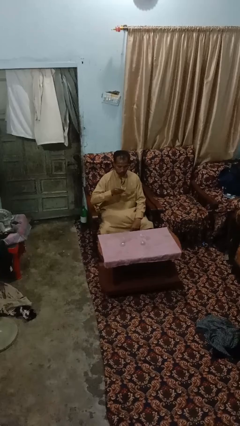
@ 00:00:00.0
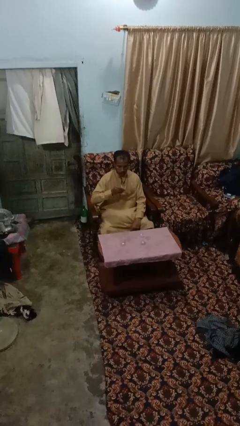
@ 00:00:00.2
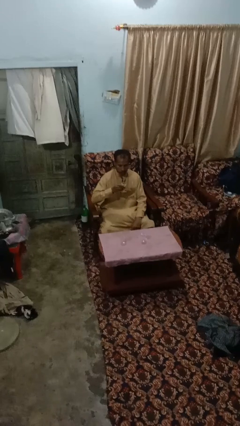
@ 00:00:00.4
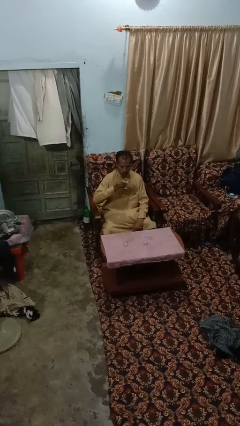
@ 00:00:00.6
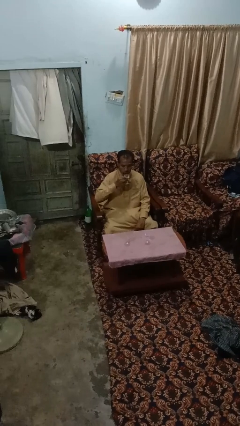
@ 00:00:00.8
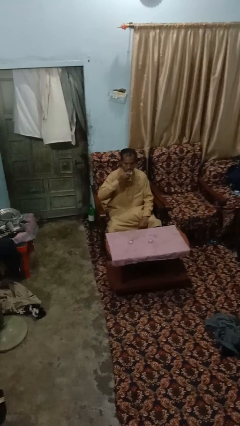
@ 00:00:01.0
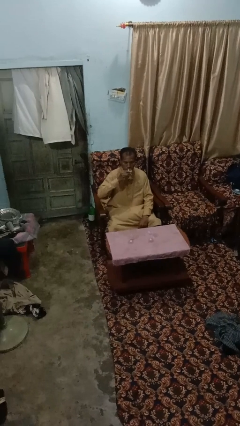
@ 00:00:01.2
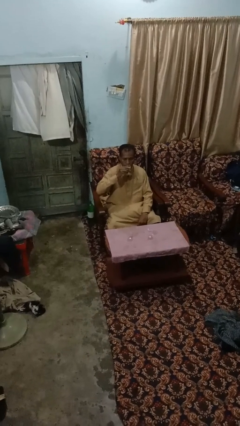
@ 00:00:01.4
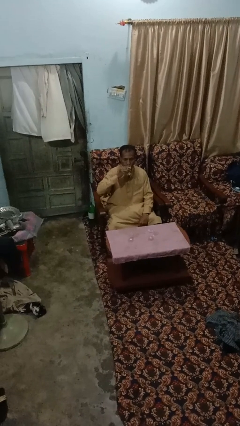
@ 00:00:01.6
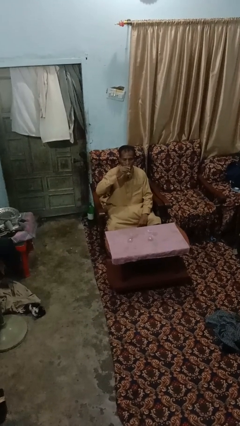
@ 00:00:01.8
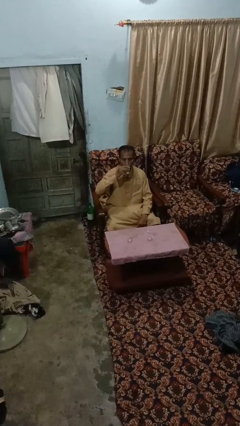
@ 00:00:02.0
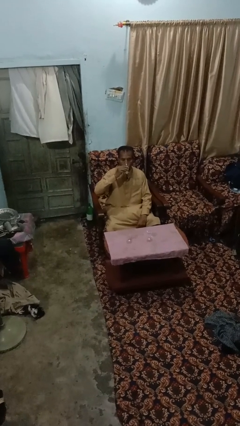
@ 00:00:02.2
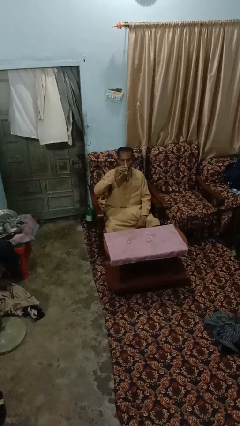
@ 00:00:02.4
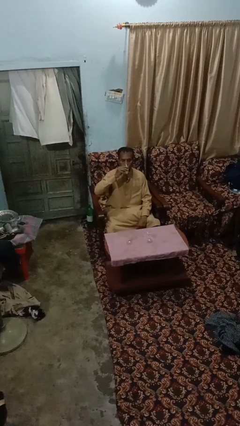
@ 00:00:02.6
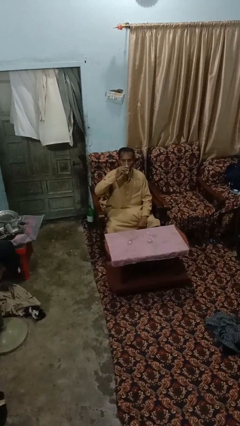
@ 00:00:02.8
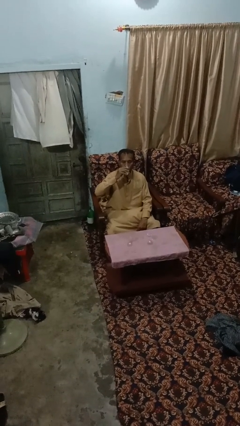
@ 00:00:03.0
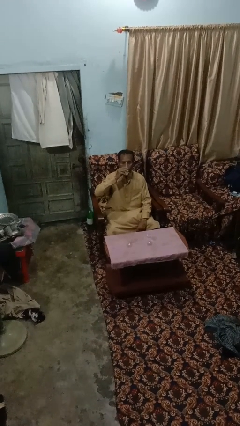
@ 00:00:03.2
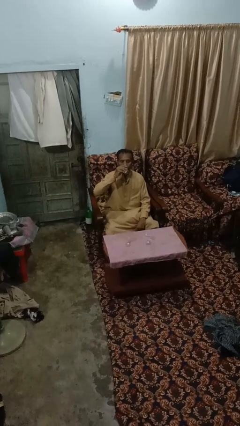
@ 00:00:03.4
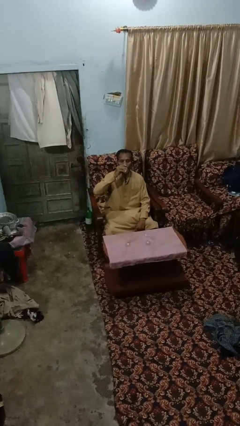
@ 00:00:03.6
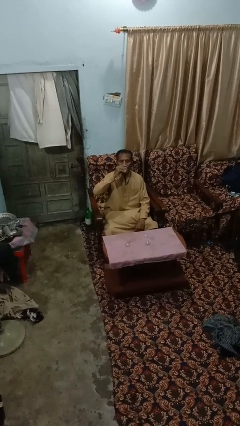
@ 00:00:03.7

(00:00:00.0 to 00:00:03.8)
person drinks from shotglass

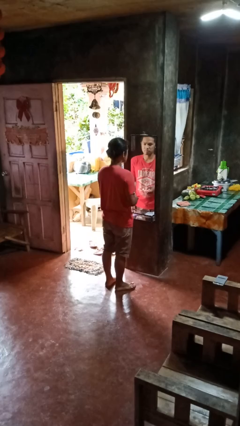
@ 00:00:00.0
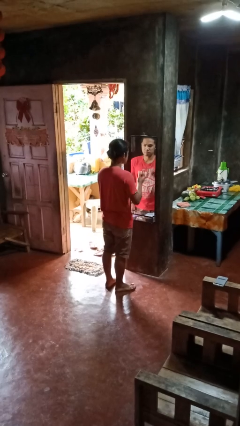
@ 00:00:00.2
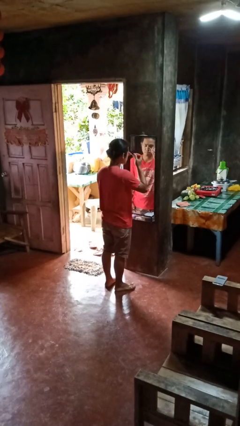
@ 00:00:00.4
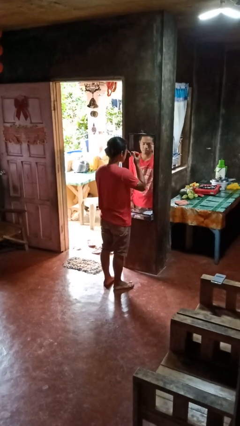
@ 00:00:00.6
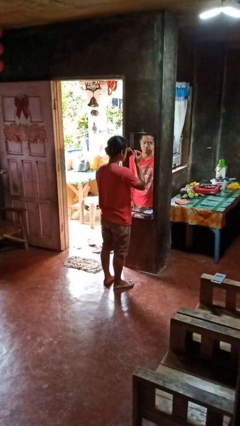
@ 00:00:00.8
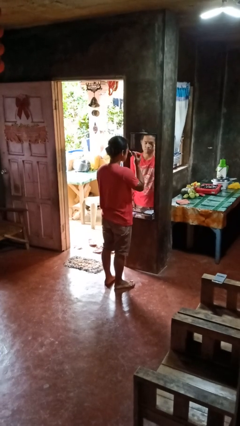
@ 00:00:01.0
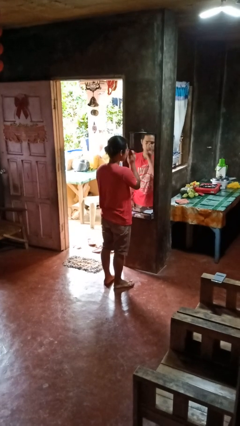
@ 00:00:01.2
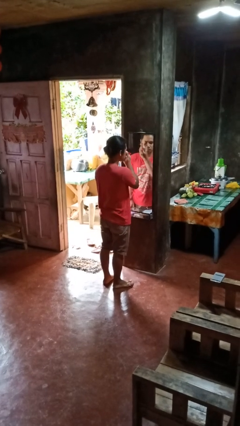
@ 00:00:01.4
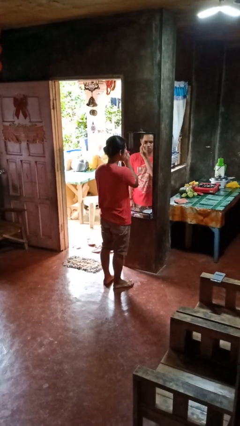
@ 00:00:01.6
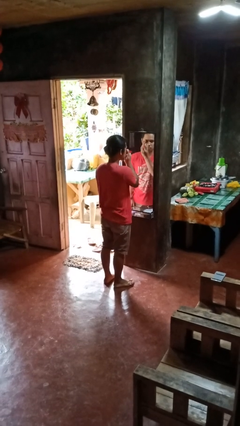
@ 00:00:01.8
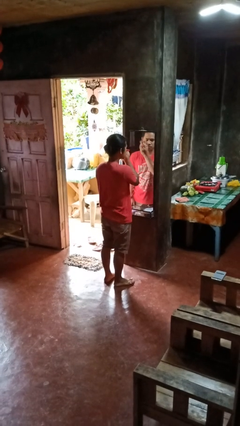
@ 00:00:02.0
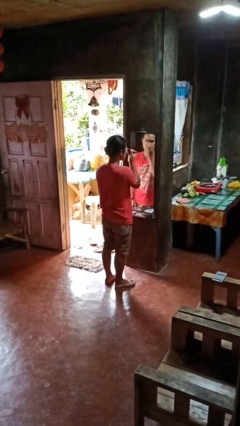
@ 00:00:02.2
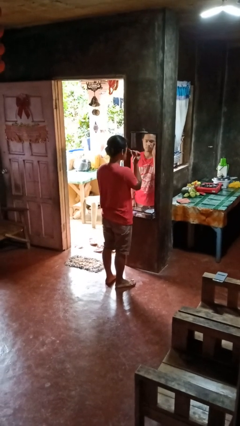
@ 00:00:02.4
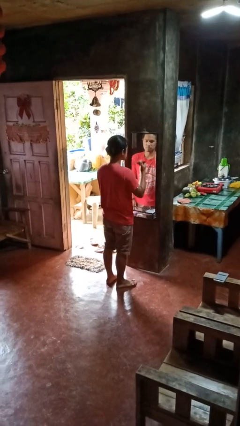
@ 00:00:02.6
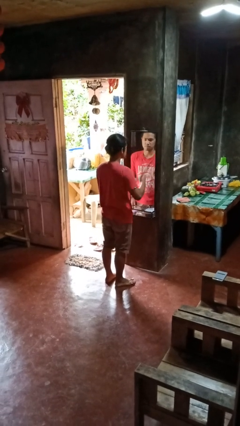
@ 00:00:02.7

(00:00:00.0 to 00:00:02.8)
person applies eye makeup

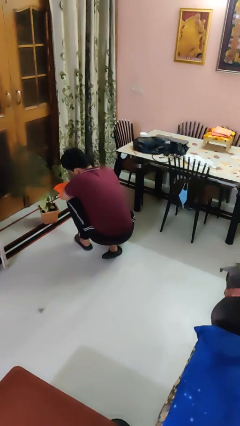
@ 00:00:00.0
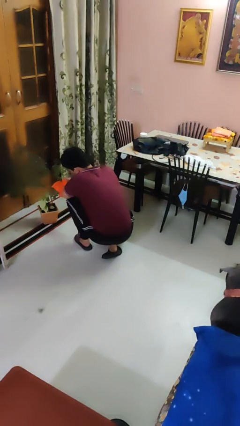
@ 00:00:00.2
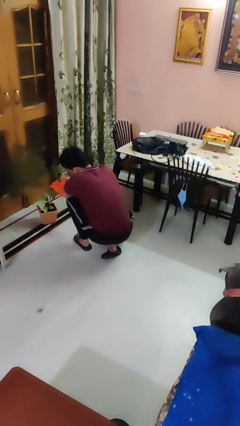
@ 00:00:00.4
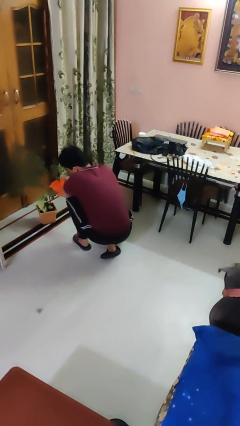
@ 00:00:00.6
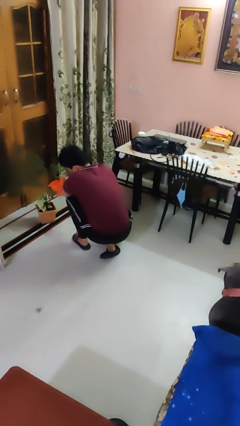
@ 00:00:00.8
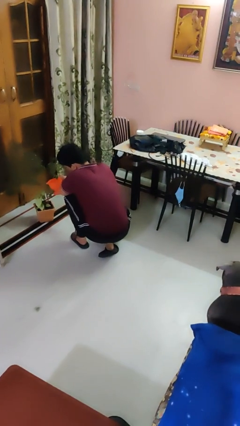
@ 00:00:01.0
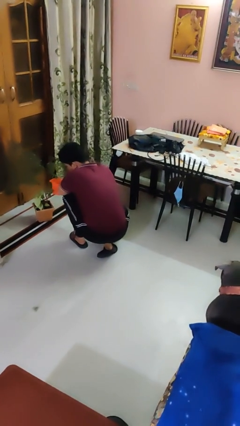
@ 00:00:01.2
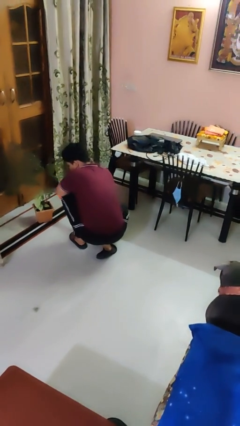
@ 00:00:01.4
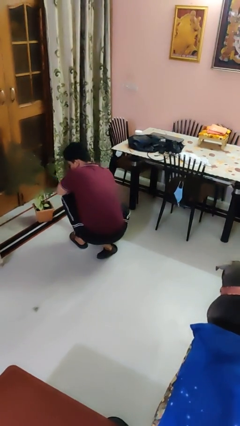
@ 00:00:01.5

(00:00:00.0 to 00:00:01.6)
person waters houseplant

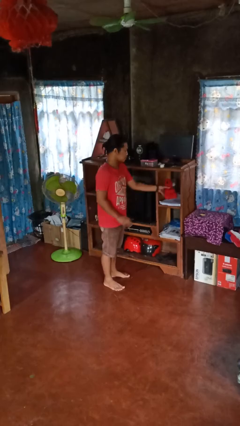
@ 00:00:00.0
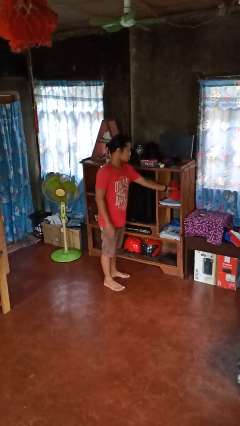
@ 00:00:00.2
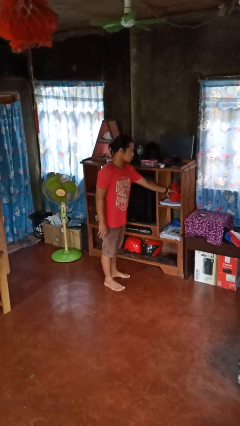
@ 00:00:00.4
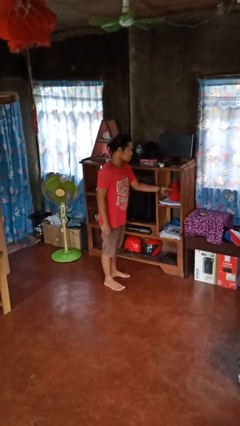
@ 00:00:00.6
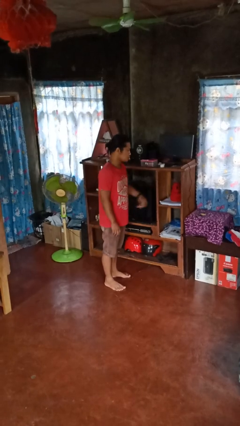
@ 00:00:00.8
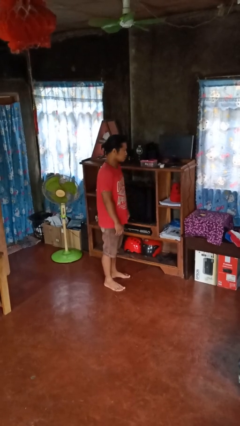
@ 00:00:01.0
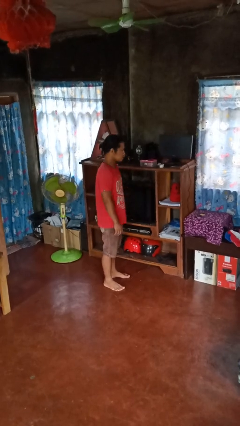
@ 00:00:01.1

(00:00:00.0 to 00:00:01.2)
person puts down object on shelf

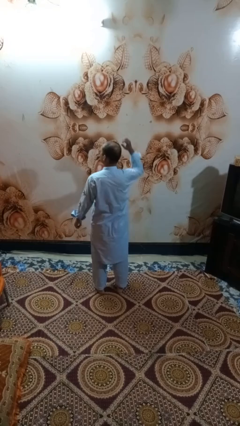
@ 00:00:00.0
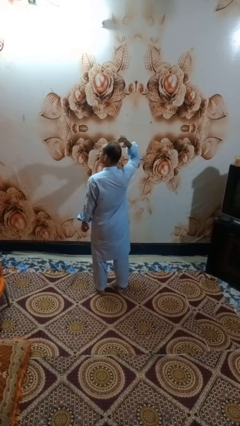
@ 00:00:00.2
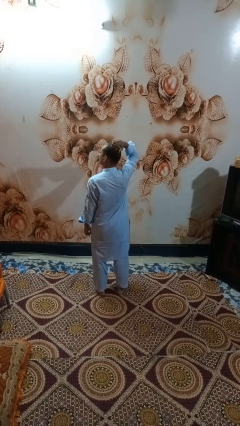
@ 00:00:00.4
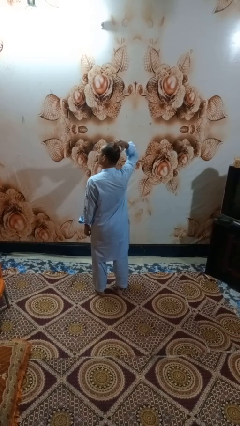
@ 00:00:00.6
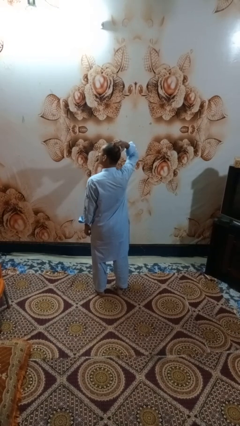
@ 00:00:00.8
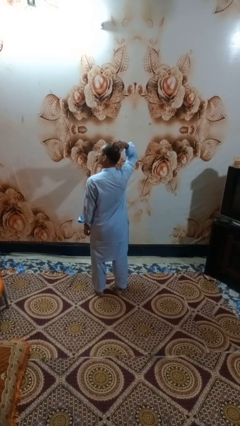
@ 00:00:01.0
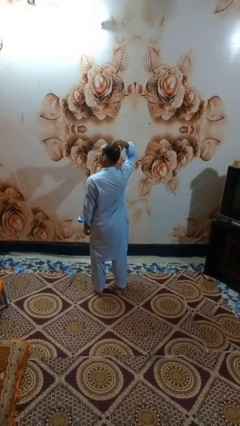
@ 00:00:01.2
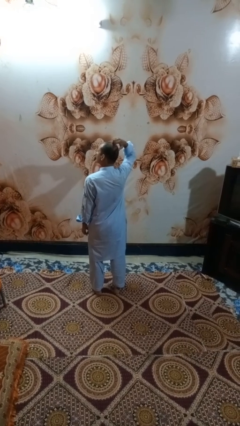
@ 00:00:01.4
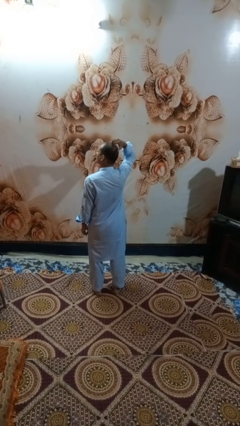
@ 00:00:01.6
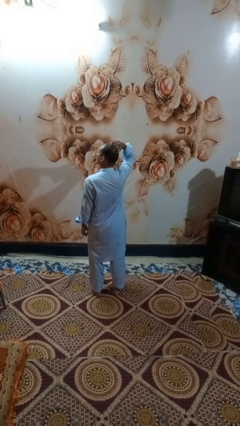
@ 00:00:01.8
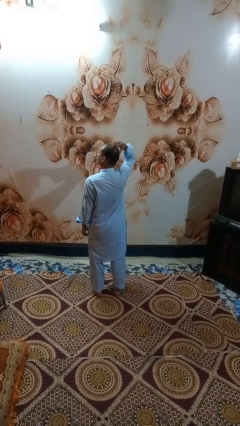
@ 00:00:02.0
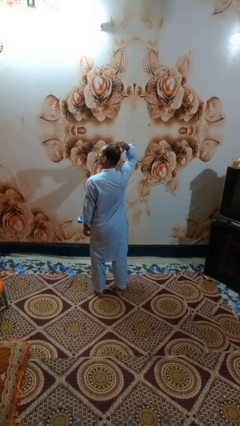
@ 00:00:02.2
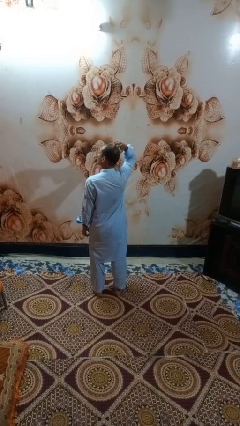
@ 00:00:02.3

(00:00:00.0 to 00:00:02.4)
person scratches face

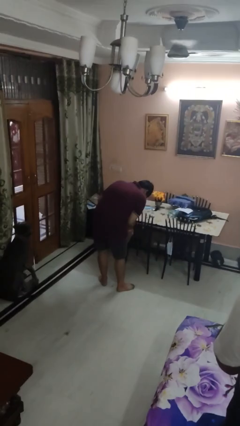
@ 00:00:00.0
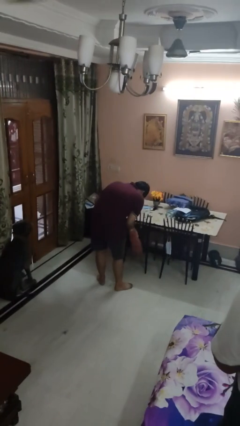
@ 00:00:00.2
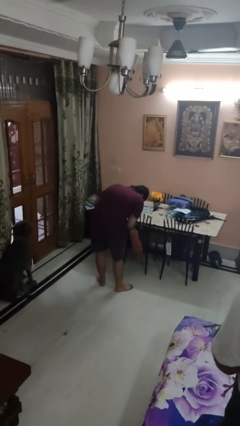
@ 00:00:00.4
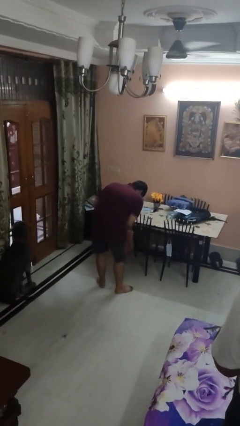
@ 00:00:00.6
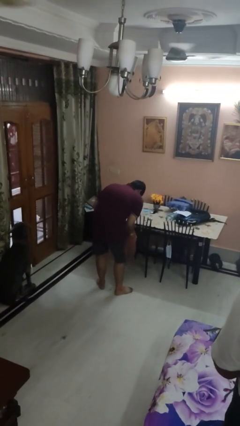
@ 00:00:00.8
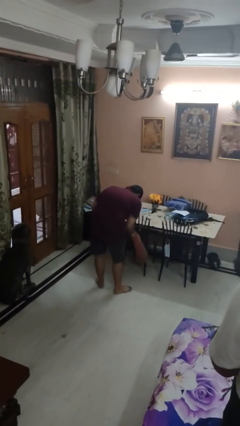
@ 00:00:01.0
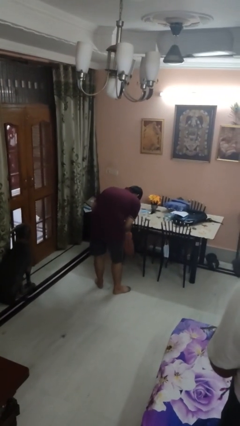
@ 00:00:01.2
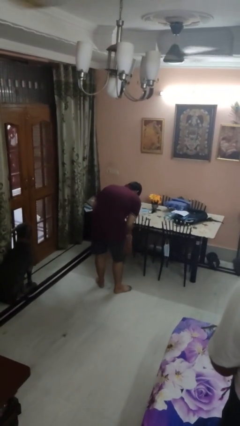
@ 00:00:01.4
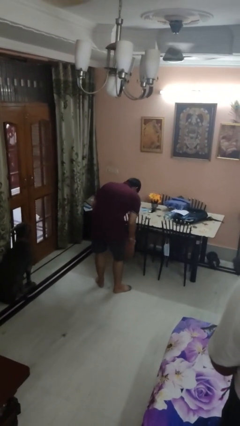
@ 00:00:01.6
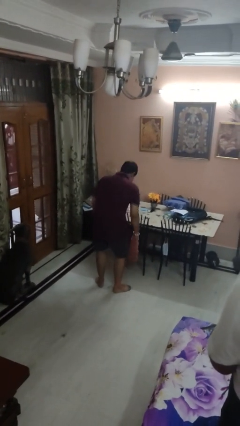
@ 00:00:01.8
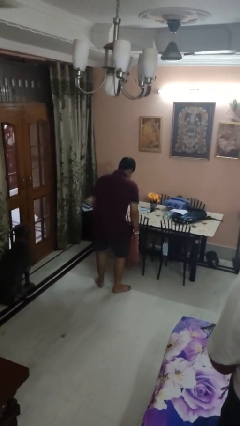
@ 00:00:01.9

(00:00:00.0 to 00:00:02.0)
person dusts furniture

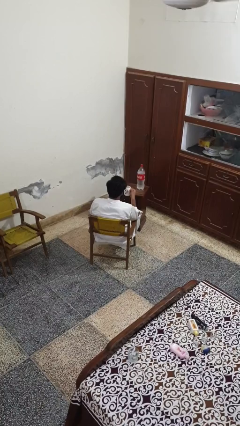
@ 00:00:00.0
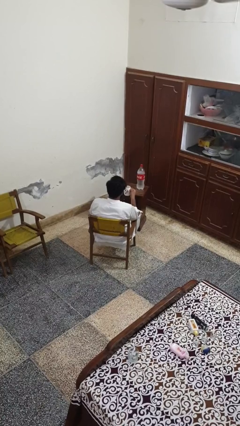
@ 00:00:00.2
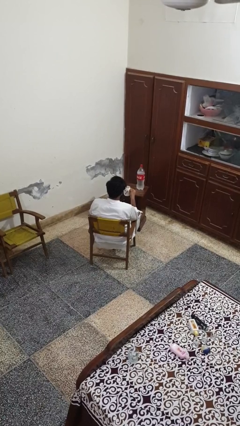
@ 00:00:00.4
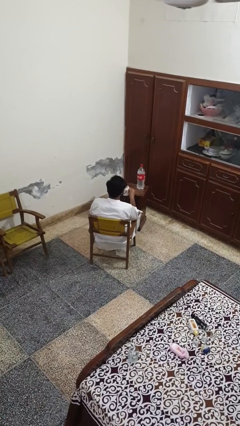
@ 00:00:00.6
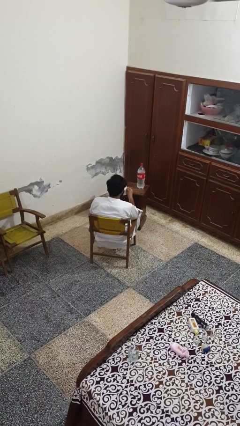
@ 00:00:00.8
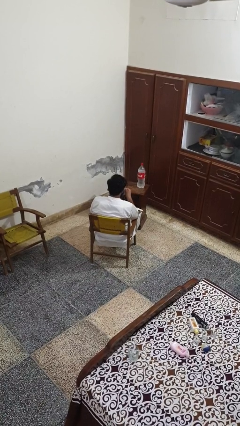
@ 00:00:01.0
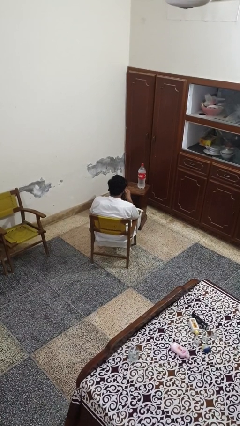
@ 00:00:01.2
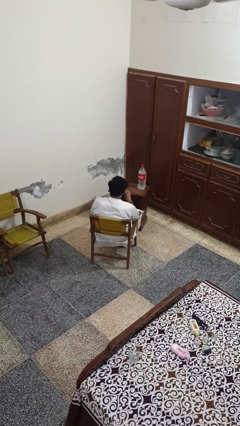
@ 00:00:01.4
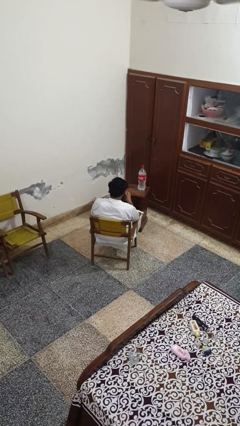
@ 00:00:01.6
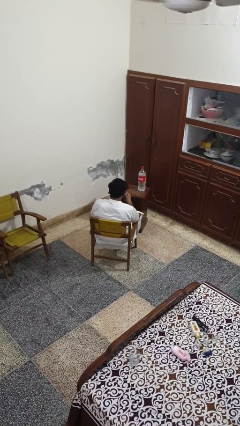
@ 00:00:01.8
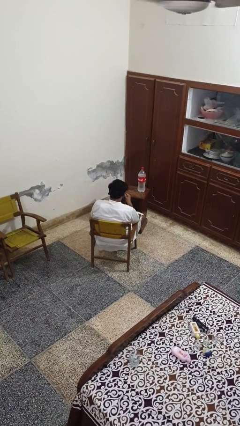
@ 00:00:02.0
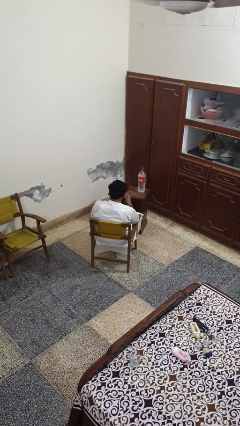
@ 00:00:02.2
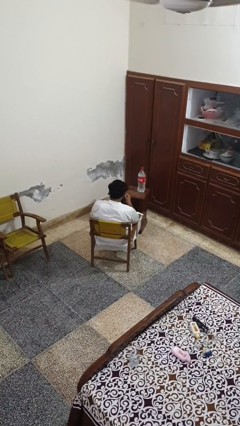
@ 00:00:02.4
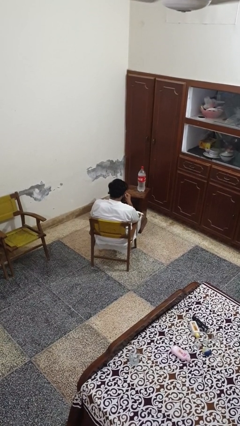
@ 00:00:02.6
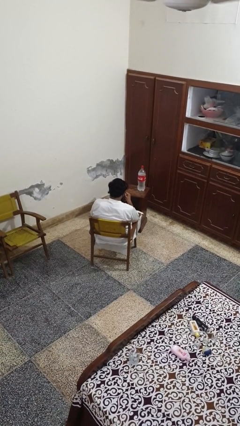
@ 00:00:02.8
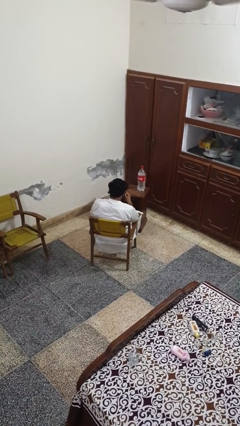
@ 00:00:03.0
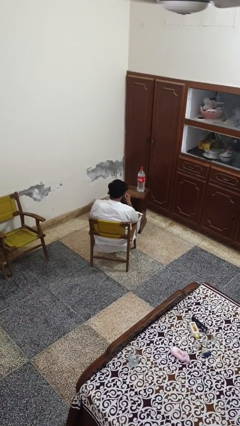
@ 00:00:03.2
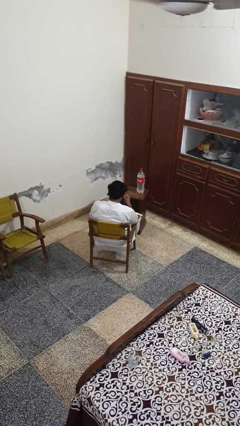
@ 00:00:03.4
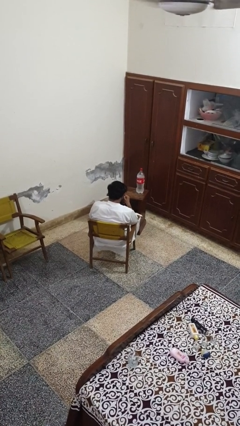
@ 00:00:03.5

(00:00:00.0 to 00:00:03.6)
person drinks from mug
